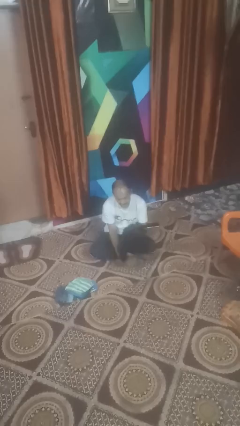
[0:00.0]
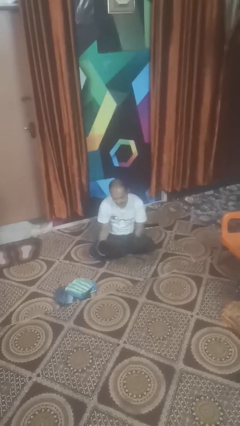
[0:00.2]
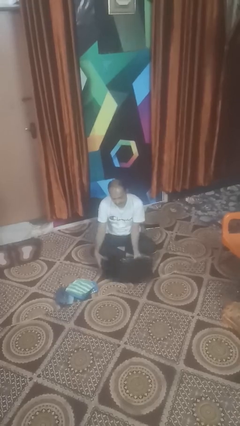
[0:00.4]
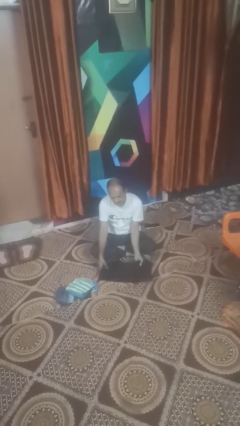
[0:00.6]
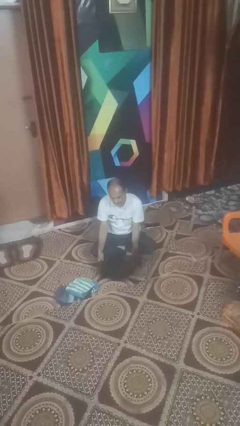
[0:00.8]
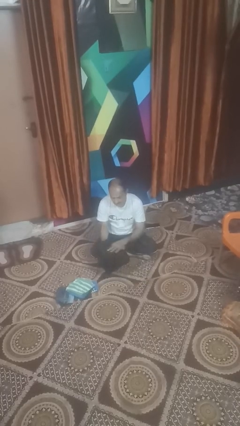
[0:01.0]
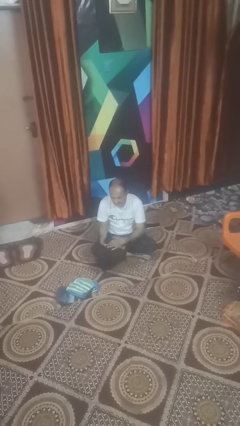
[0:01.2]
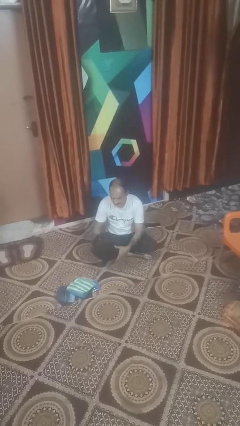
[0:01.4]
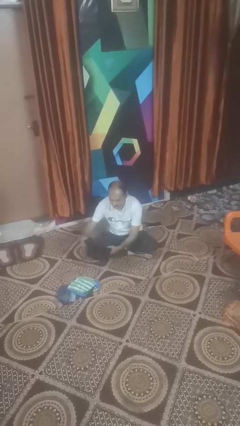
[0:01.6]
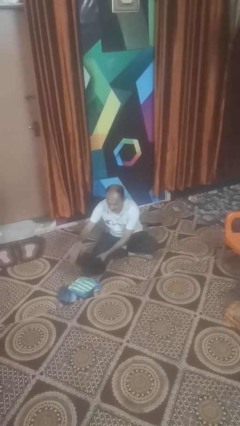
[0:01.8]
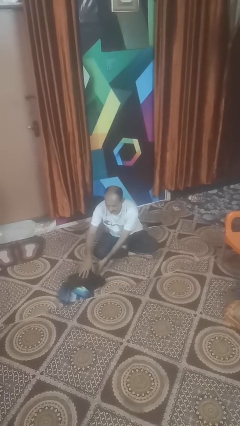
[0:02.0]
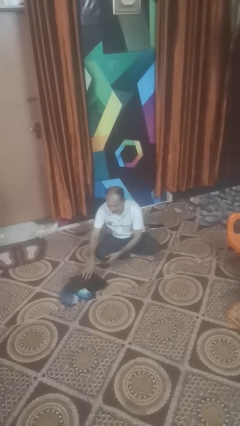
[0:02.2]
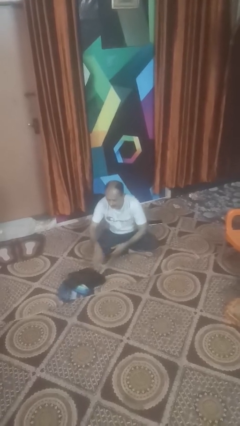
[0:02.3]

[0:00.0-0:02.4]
person folds pants

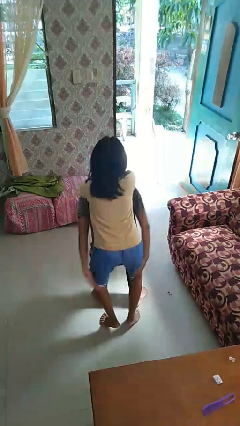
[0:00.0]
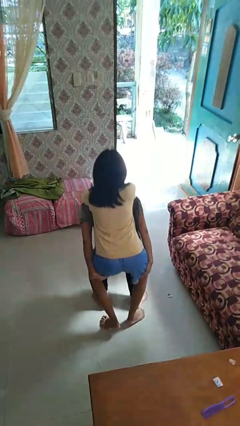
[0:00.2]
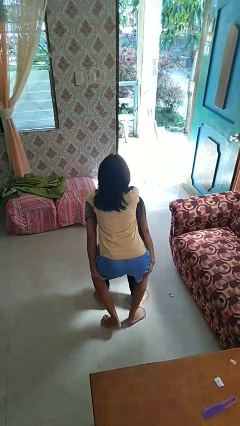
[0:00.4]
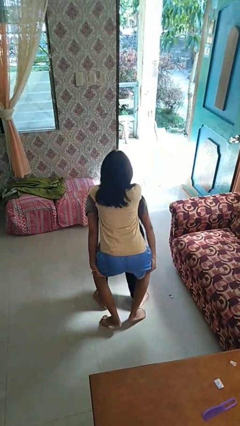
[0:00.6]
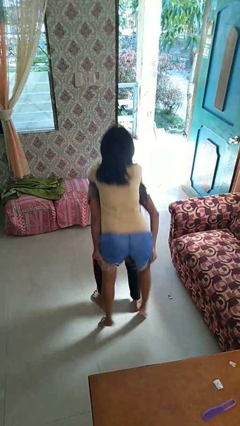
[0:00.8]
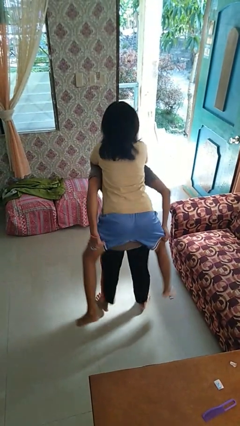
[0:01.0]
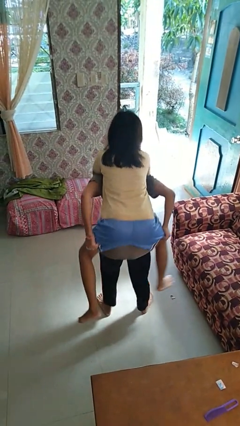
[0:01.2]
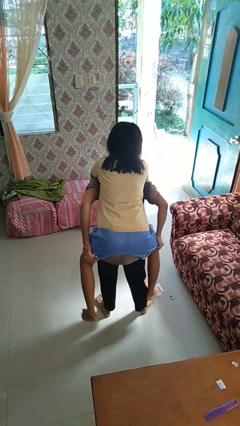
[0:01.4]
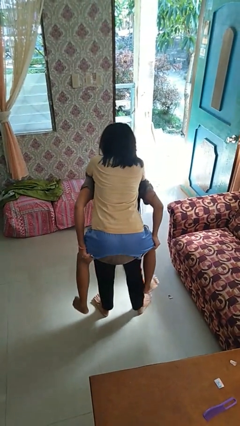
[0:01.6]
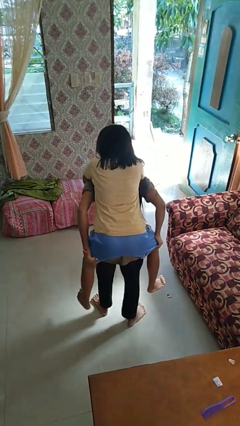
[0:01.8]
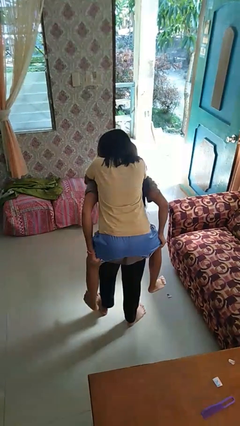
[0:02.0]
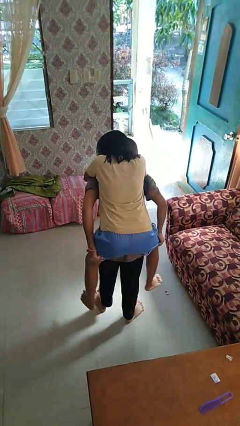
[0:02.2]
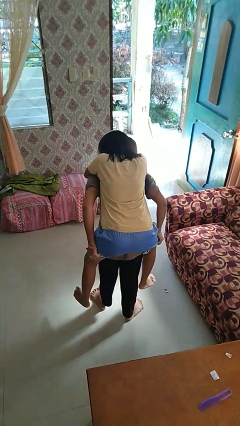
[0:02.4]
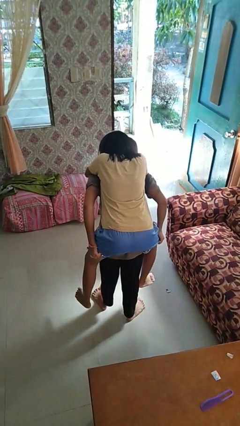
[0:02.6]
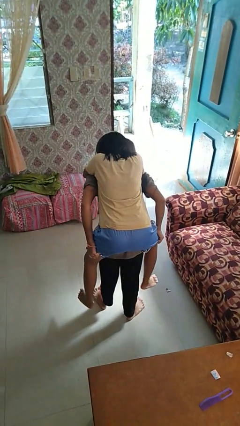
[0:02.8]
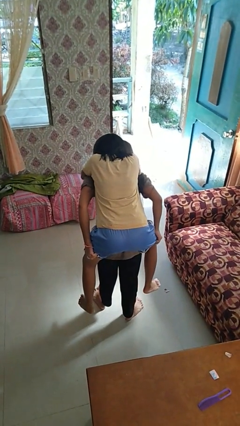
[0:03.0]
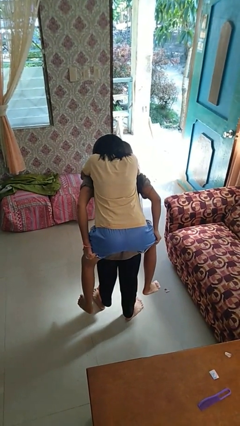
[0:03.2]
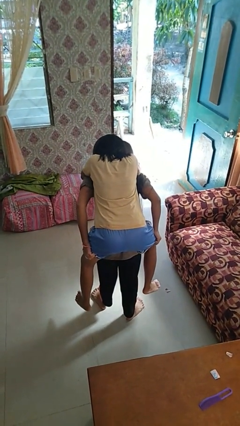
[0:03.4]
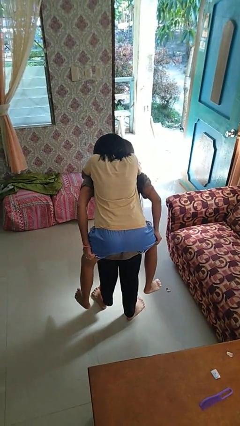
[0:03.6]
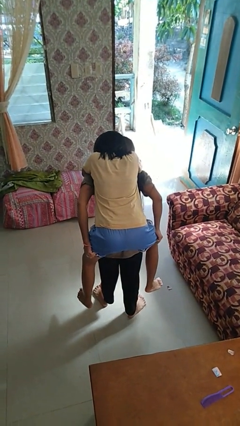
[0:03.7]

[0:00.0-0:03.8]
person carries person on back

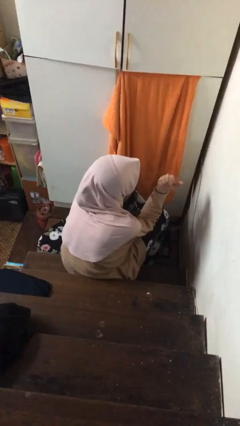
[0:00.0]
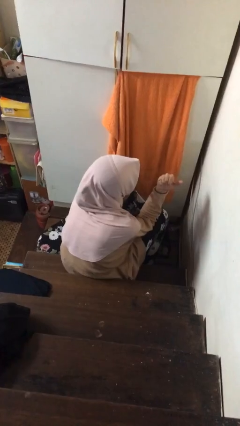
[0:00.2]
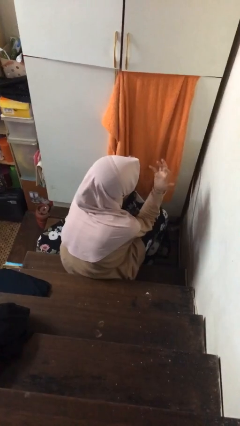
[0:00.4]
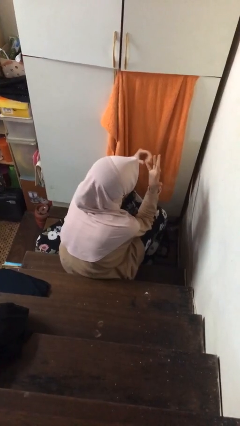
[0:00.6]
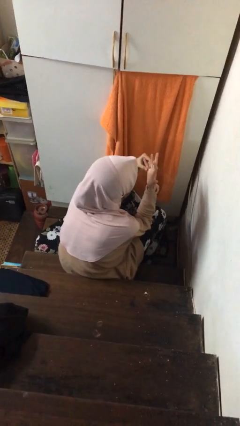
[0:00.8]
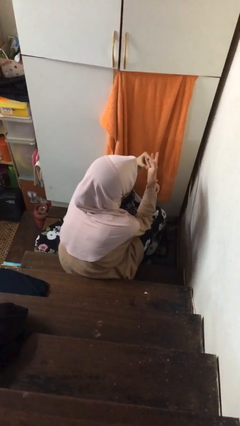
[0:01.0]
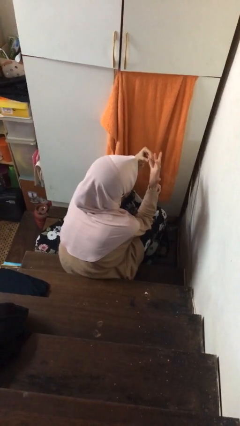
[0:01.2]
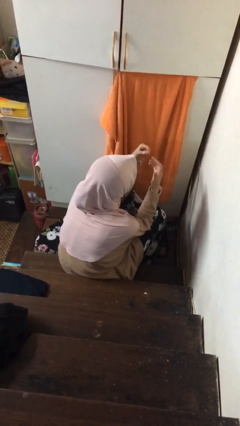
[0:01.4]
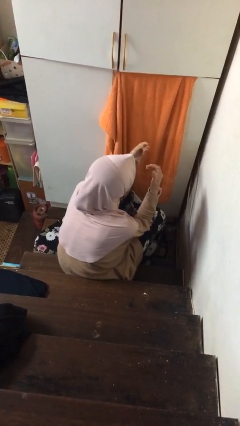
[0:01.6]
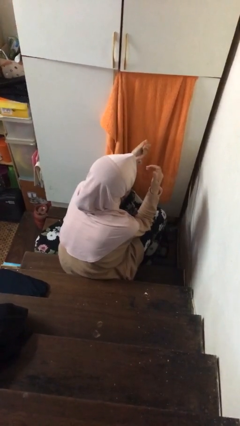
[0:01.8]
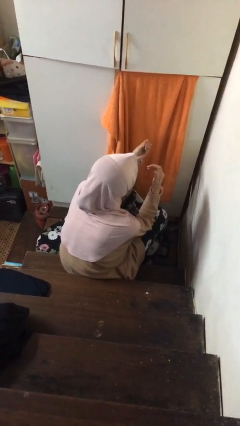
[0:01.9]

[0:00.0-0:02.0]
person takes off ring

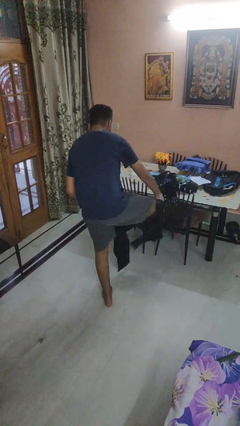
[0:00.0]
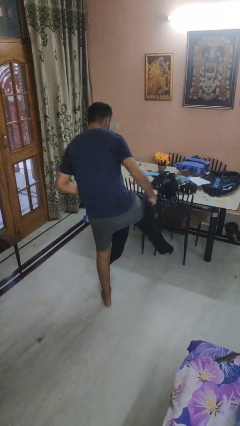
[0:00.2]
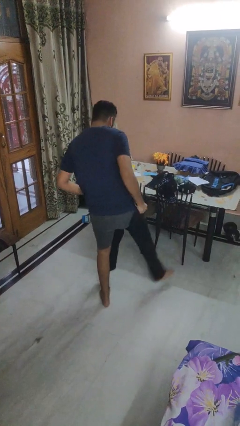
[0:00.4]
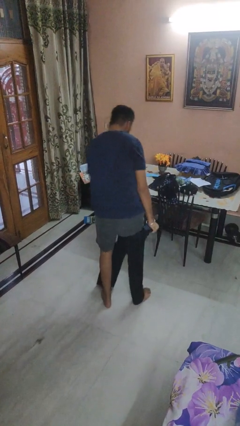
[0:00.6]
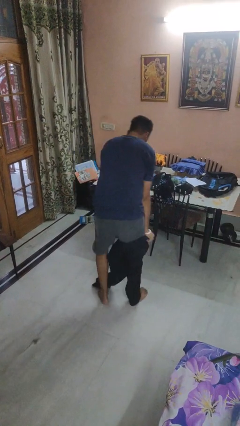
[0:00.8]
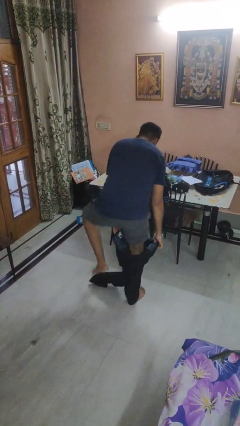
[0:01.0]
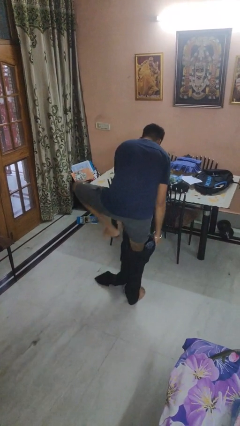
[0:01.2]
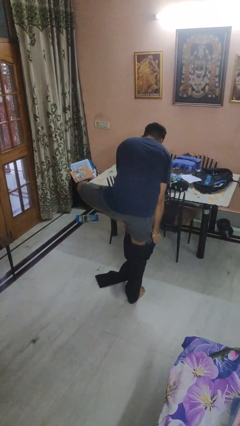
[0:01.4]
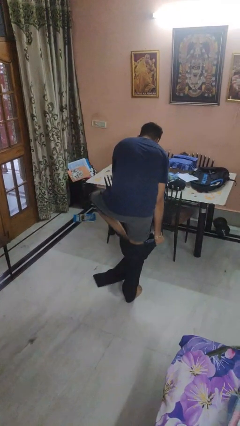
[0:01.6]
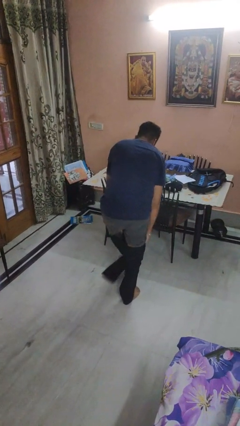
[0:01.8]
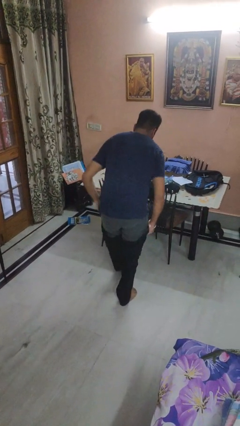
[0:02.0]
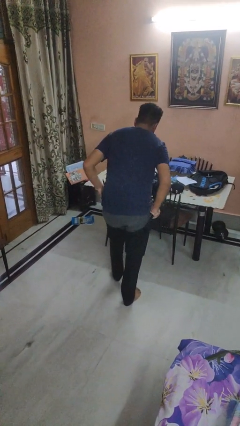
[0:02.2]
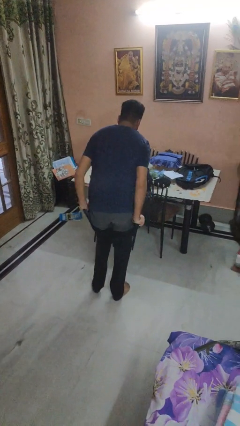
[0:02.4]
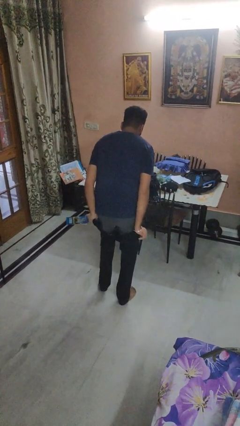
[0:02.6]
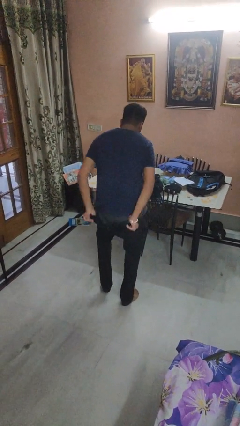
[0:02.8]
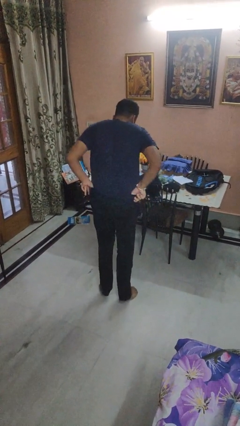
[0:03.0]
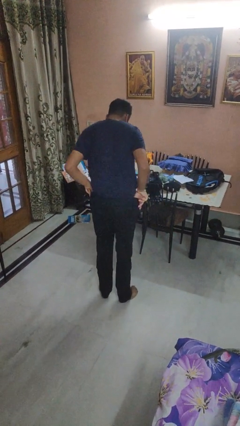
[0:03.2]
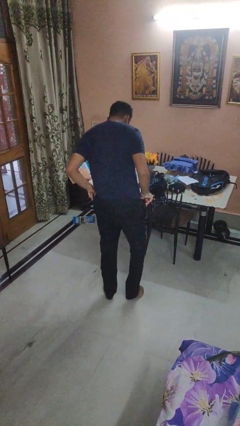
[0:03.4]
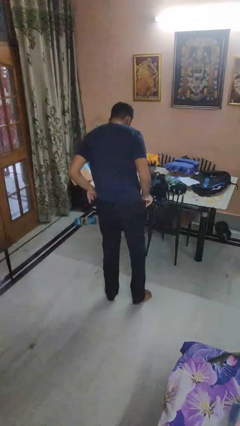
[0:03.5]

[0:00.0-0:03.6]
person puts on pants

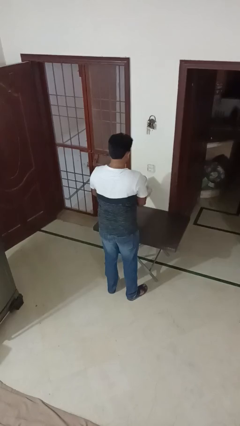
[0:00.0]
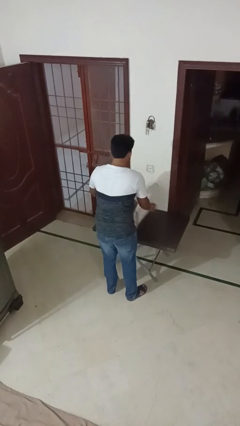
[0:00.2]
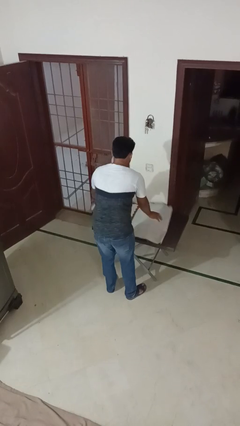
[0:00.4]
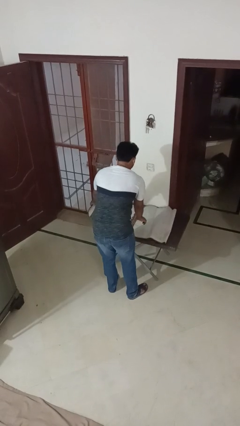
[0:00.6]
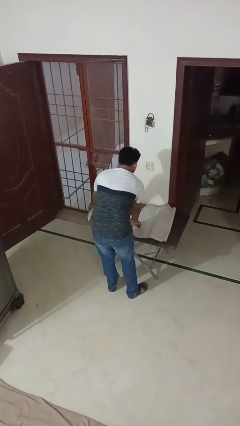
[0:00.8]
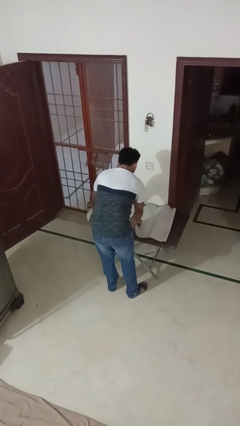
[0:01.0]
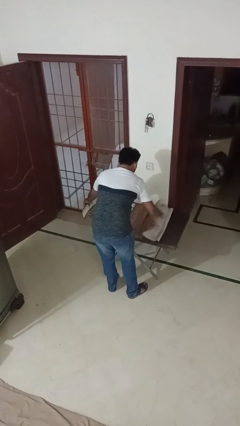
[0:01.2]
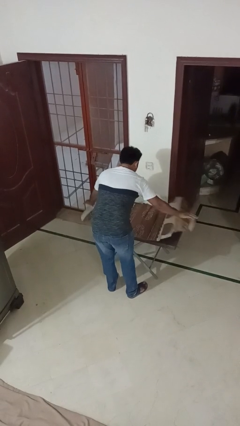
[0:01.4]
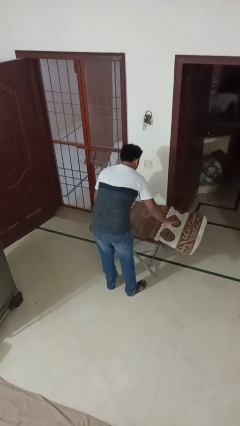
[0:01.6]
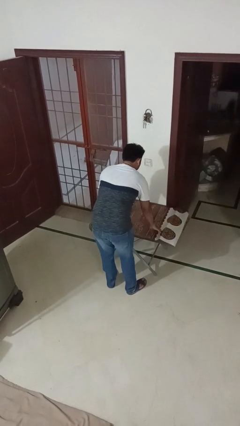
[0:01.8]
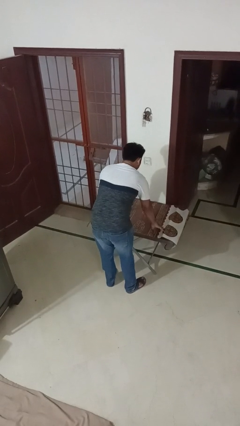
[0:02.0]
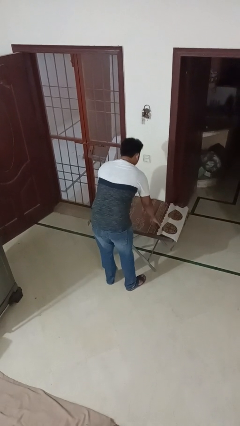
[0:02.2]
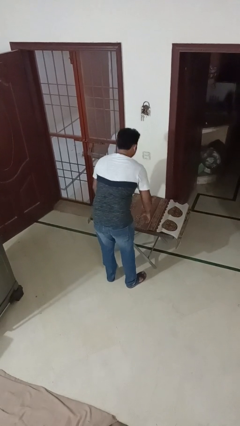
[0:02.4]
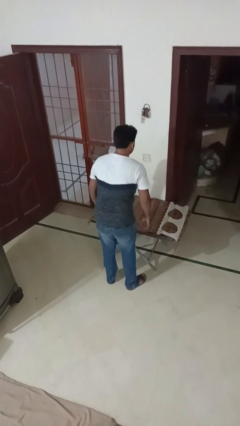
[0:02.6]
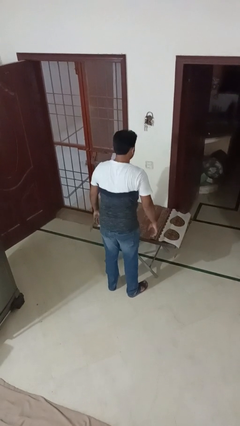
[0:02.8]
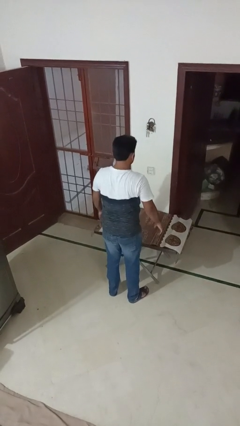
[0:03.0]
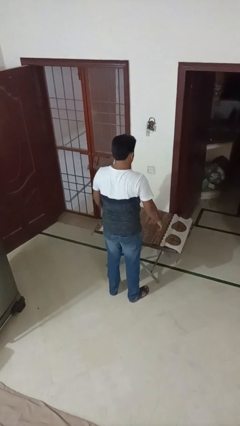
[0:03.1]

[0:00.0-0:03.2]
person spreads tablecloth

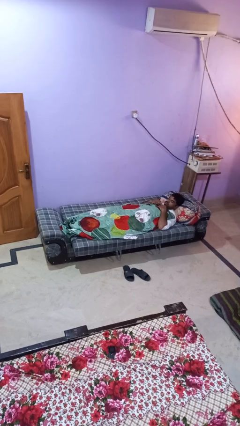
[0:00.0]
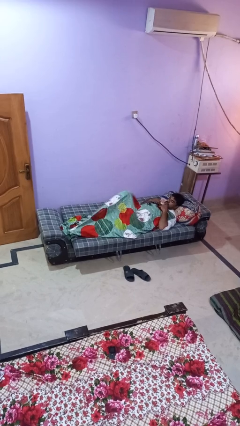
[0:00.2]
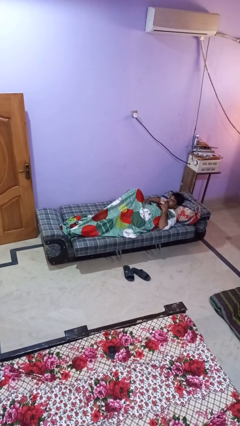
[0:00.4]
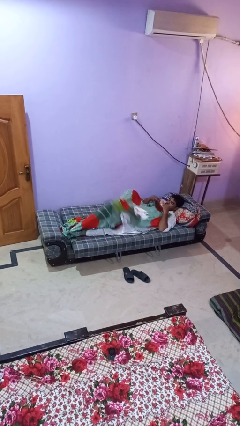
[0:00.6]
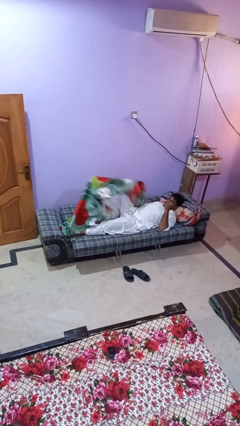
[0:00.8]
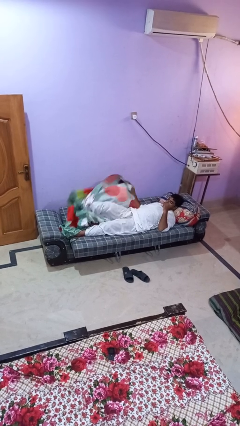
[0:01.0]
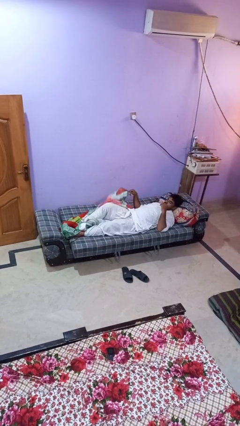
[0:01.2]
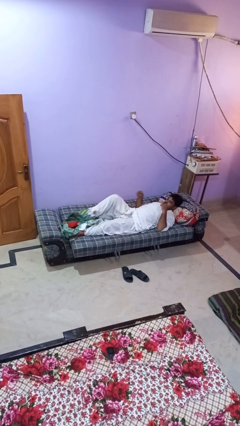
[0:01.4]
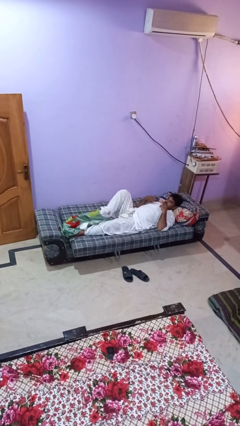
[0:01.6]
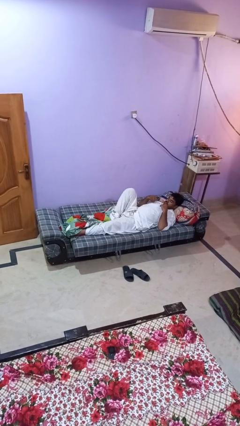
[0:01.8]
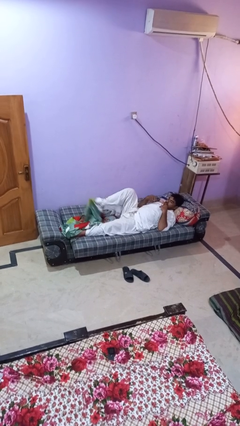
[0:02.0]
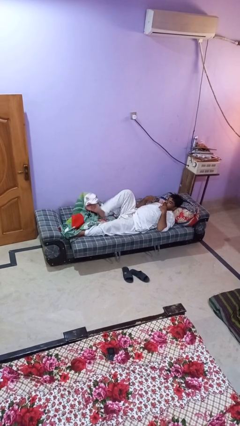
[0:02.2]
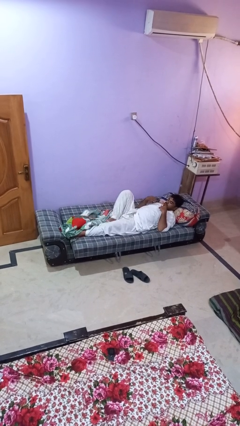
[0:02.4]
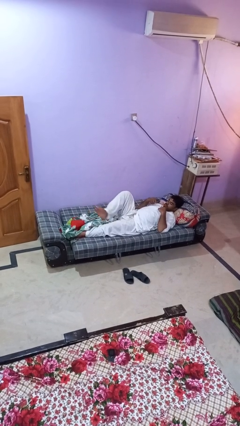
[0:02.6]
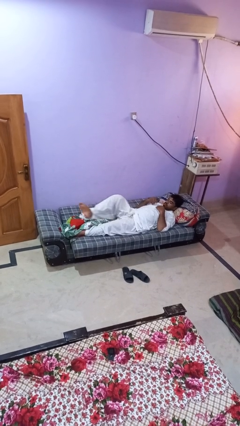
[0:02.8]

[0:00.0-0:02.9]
person uncovers with bedsheets
